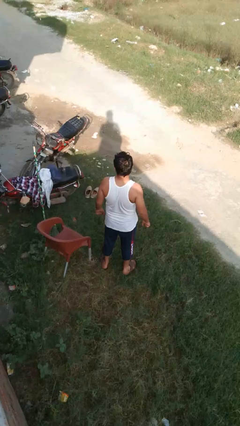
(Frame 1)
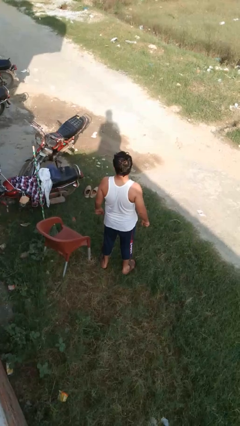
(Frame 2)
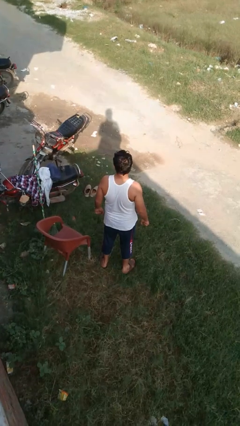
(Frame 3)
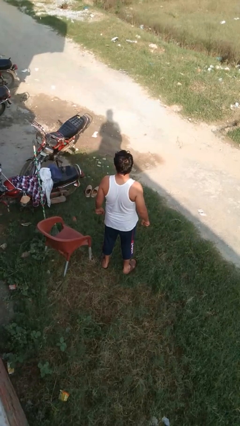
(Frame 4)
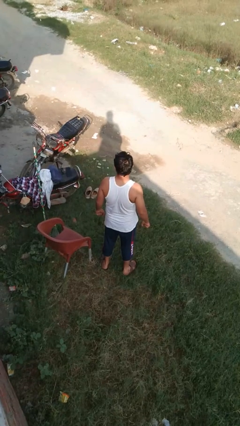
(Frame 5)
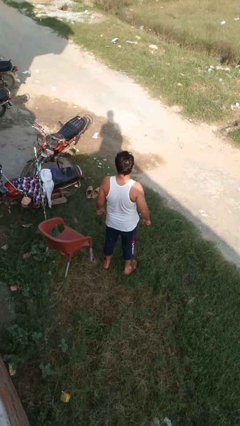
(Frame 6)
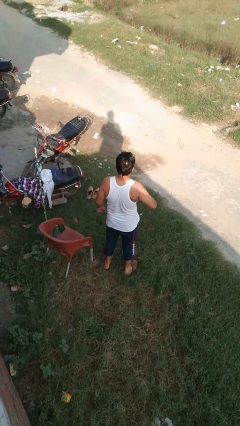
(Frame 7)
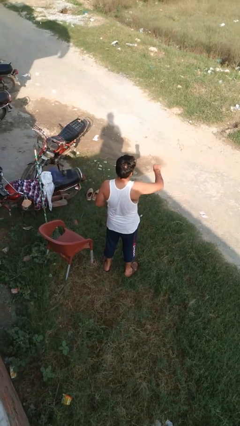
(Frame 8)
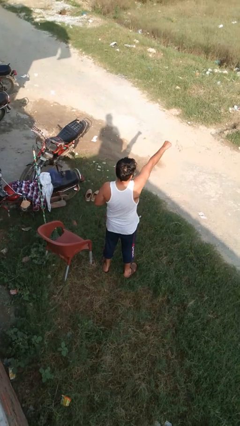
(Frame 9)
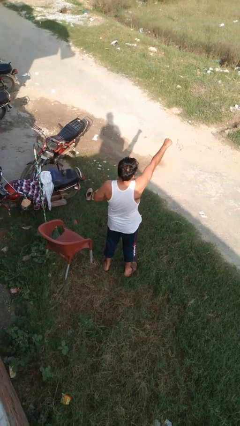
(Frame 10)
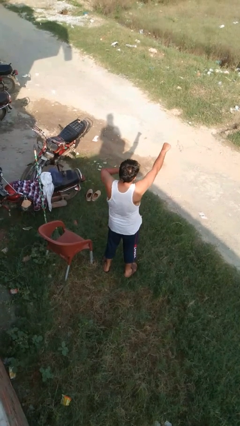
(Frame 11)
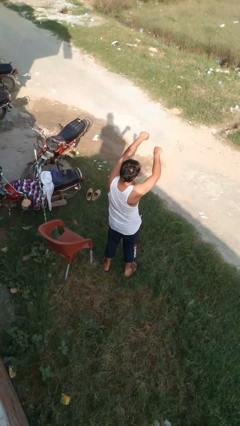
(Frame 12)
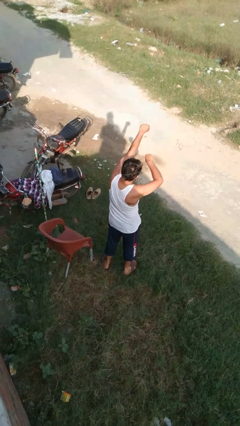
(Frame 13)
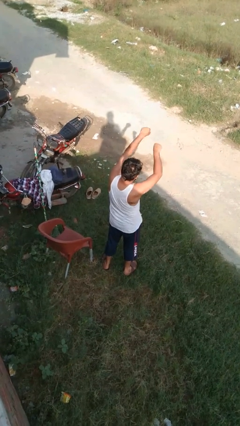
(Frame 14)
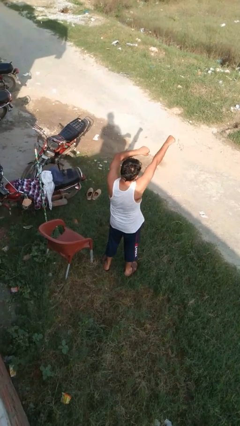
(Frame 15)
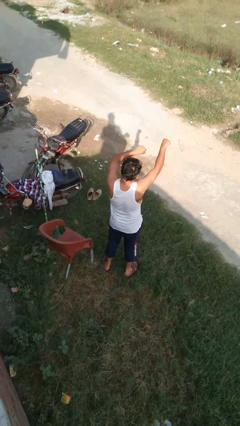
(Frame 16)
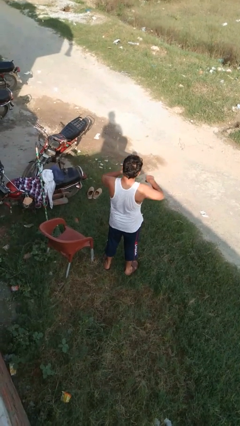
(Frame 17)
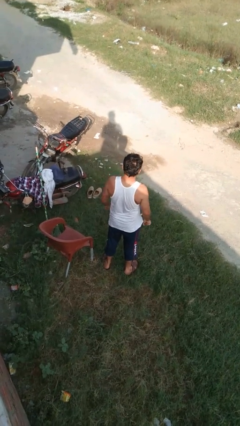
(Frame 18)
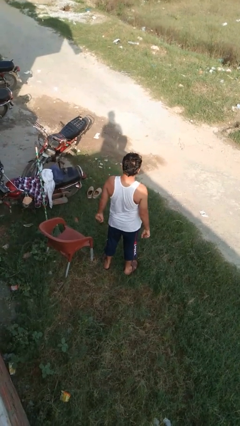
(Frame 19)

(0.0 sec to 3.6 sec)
person punches

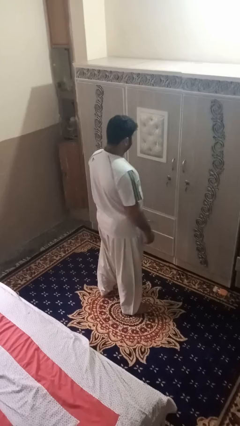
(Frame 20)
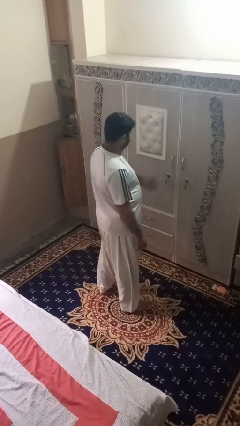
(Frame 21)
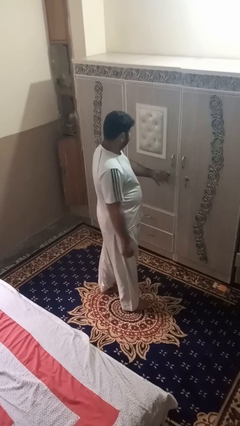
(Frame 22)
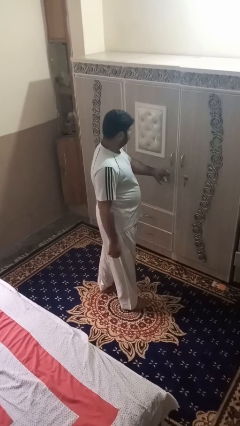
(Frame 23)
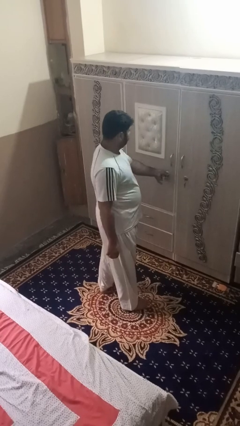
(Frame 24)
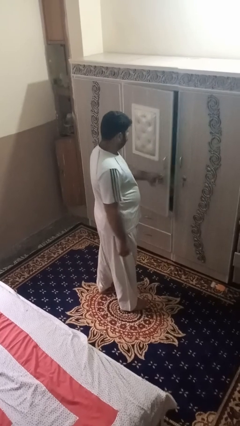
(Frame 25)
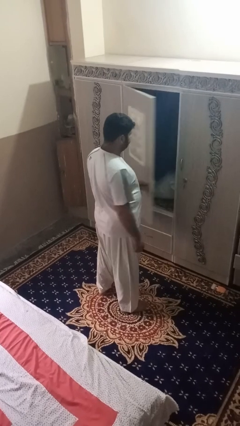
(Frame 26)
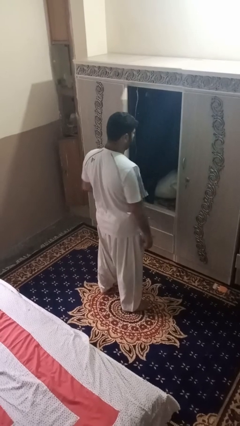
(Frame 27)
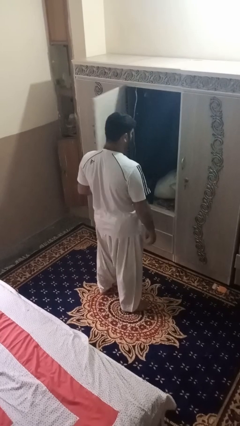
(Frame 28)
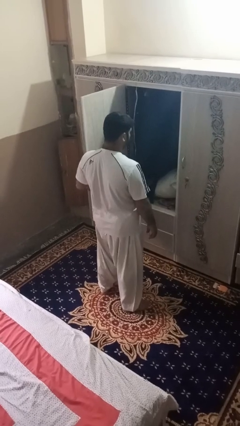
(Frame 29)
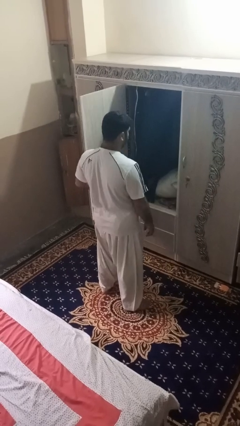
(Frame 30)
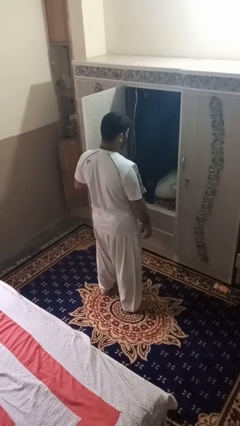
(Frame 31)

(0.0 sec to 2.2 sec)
person opens dresser drawer

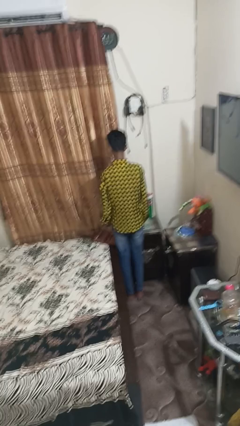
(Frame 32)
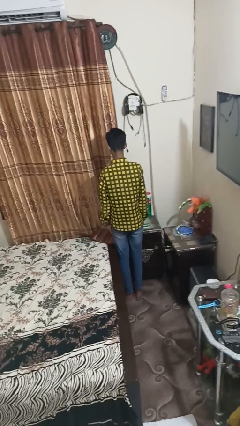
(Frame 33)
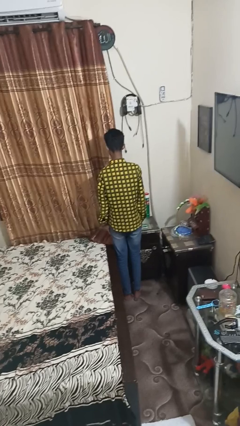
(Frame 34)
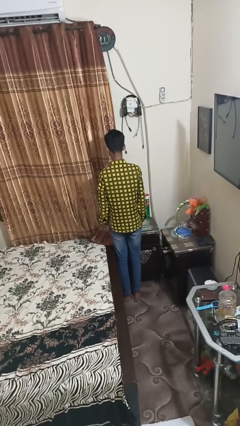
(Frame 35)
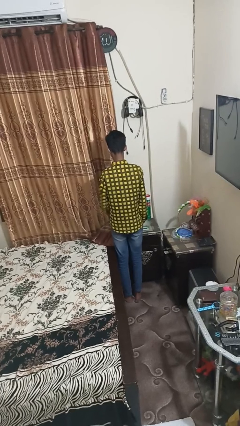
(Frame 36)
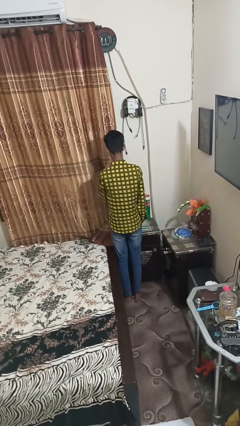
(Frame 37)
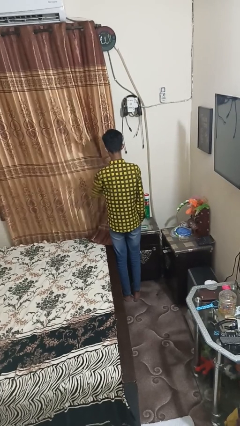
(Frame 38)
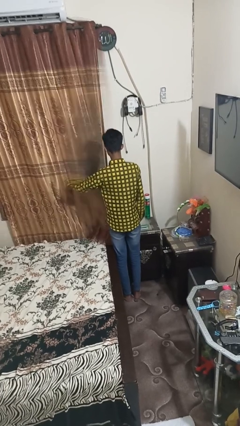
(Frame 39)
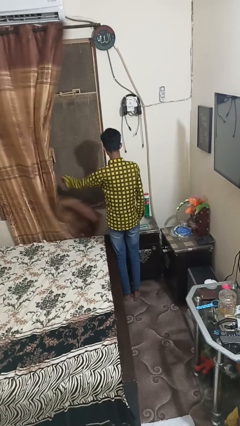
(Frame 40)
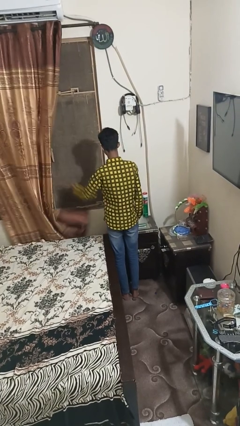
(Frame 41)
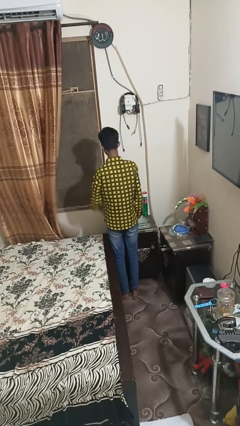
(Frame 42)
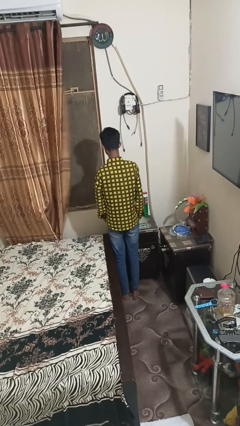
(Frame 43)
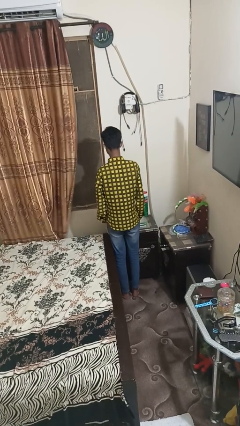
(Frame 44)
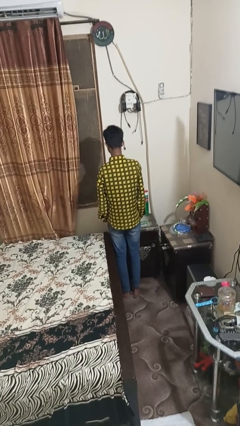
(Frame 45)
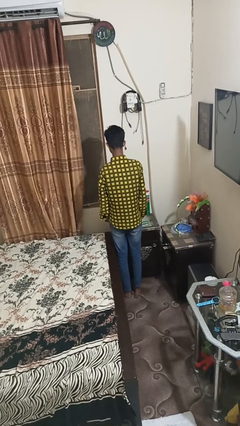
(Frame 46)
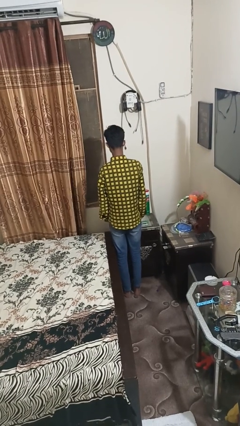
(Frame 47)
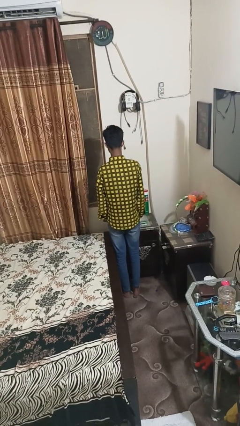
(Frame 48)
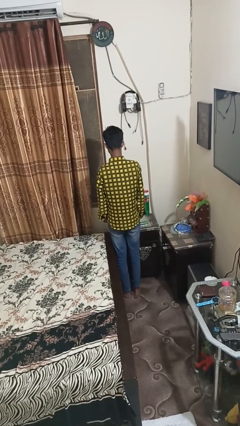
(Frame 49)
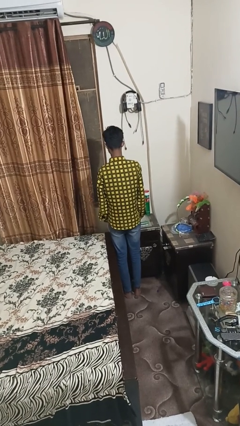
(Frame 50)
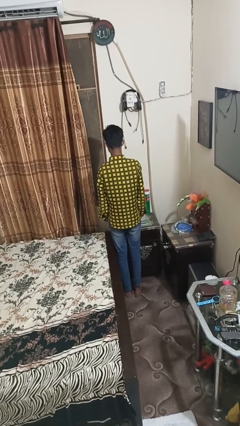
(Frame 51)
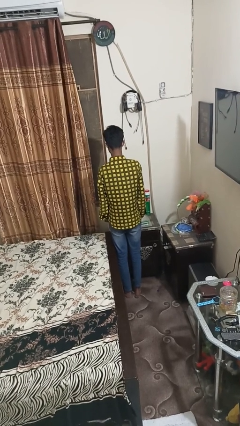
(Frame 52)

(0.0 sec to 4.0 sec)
person opens curtains

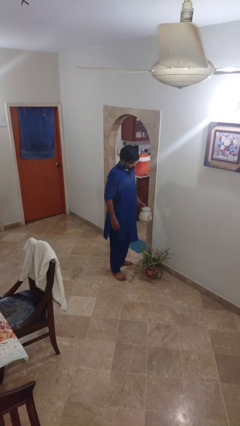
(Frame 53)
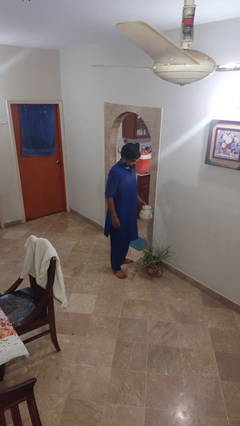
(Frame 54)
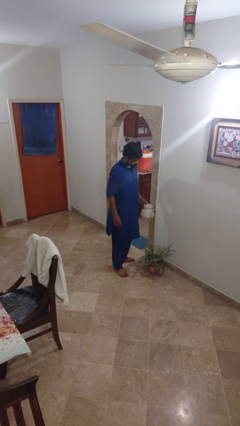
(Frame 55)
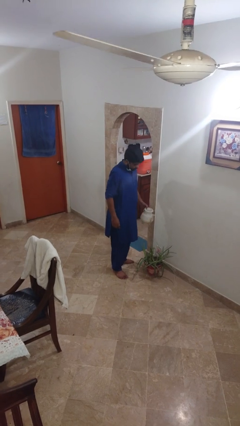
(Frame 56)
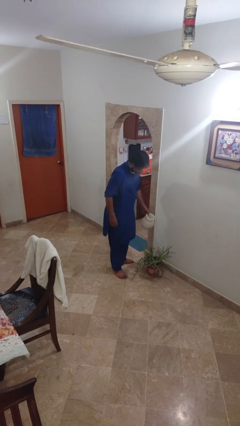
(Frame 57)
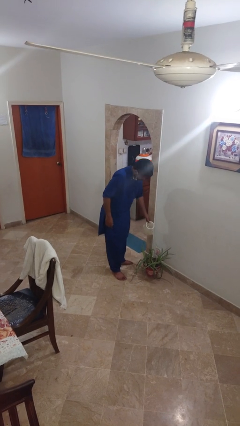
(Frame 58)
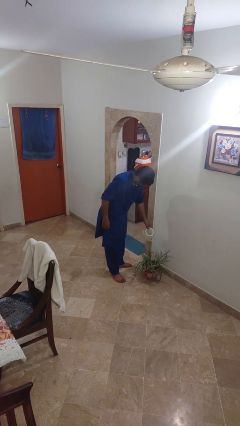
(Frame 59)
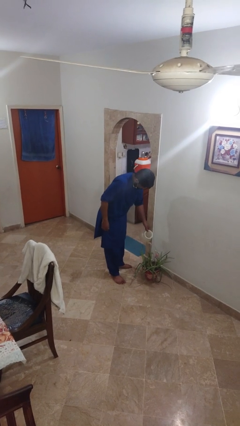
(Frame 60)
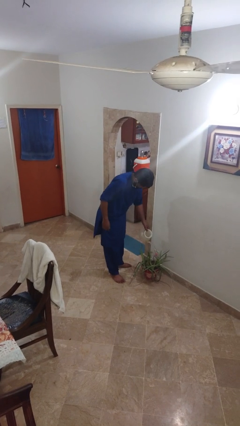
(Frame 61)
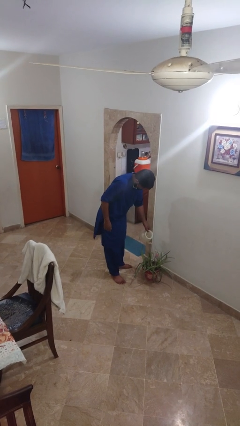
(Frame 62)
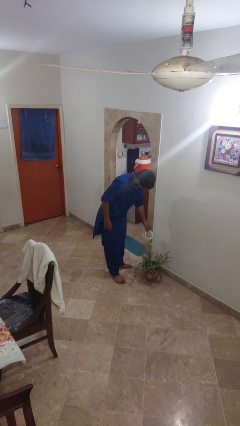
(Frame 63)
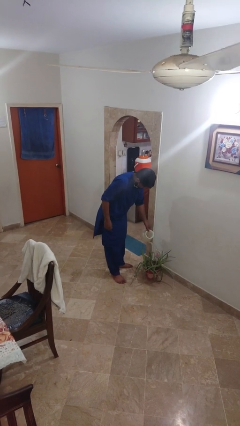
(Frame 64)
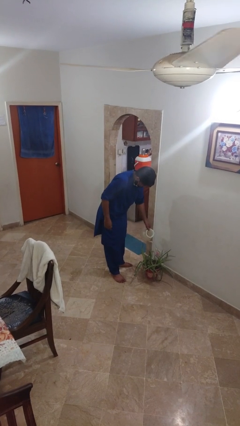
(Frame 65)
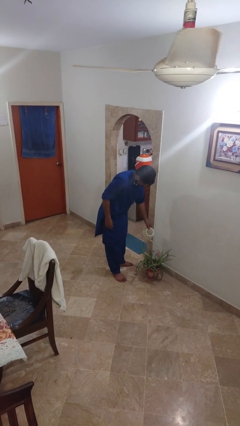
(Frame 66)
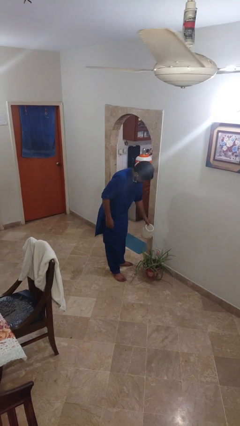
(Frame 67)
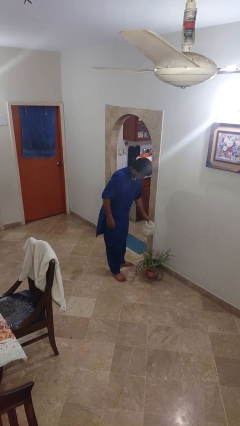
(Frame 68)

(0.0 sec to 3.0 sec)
person waters houseplant

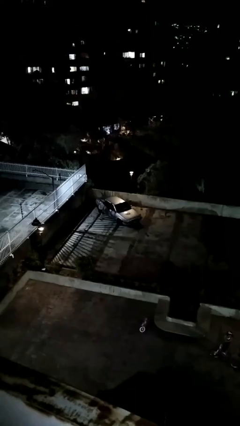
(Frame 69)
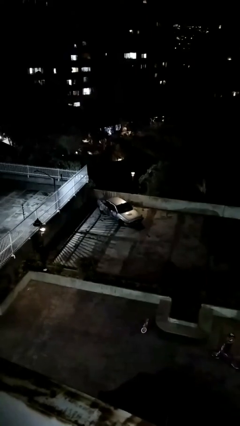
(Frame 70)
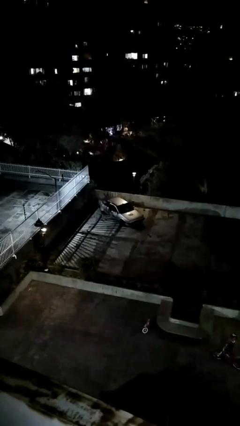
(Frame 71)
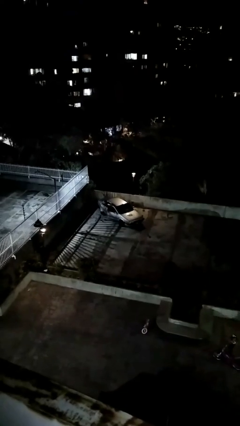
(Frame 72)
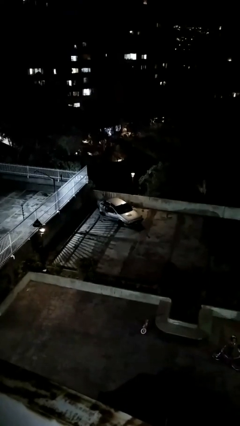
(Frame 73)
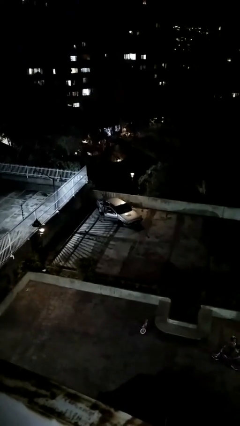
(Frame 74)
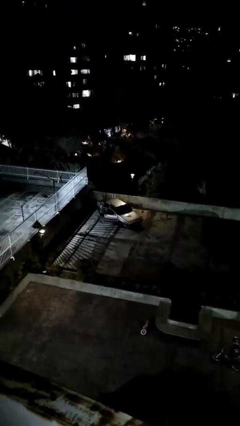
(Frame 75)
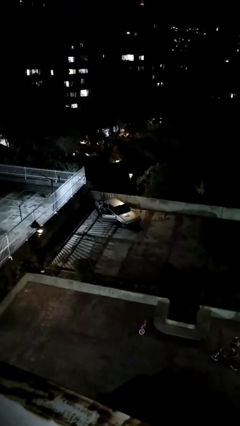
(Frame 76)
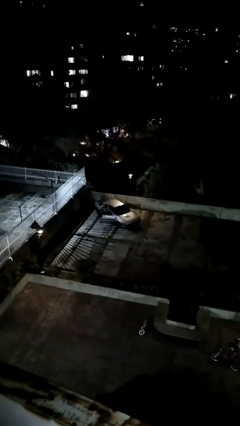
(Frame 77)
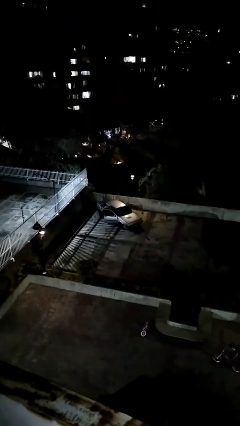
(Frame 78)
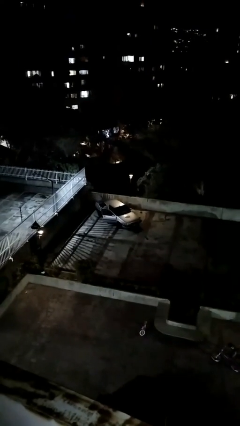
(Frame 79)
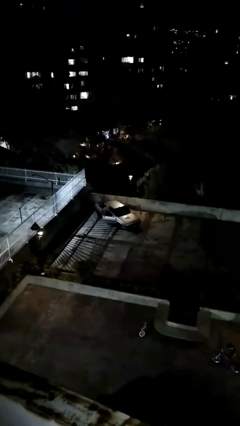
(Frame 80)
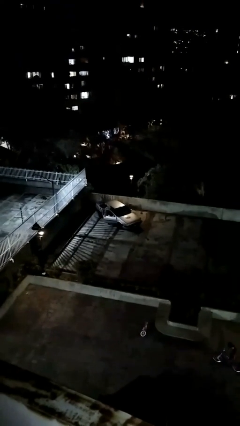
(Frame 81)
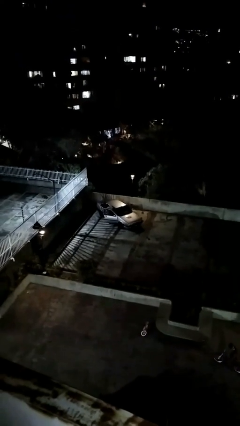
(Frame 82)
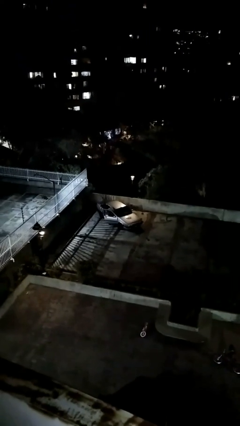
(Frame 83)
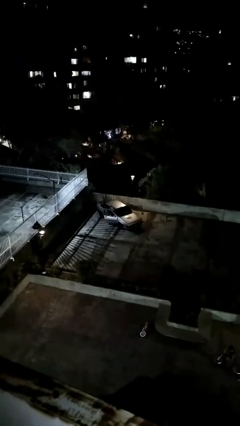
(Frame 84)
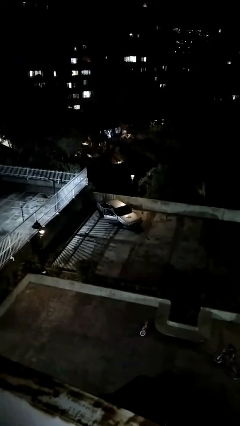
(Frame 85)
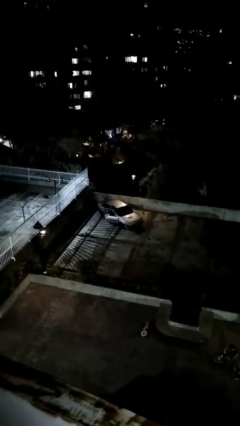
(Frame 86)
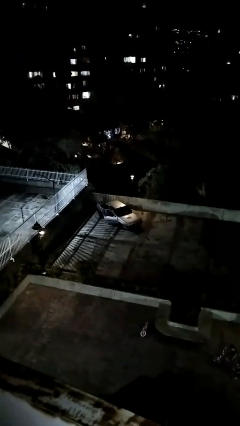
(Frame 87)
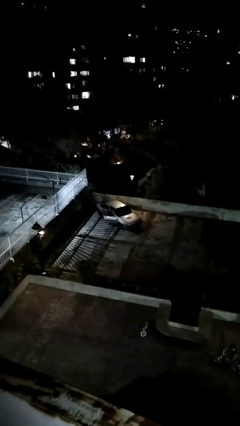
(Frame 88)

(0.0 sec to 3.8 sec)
car picks up person

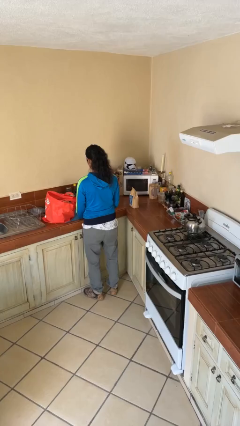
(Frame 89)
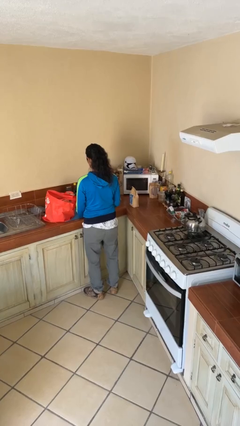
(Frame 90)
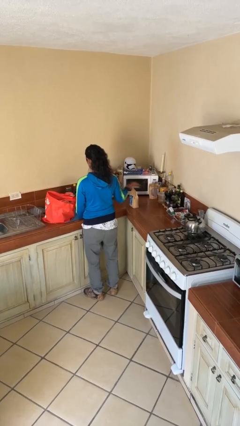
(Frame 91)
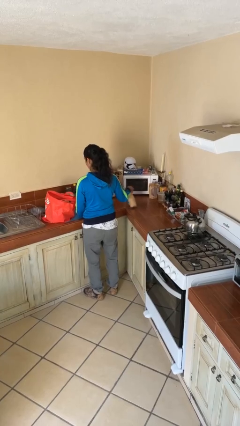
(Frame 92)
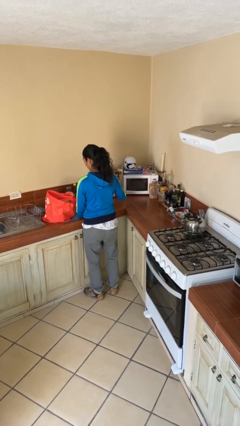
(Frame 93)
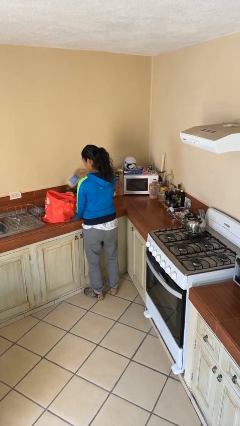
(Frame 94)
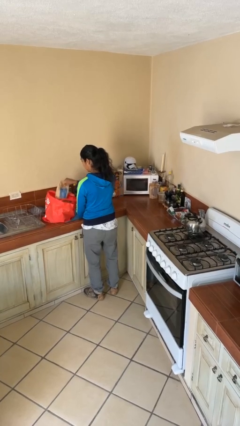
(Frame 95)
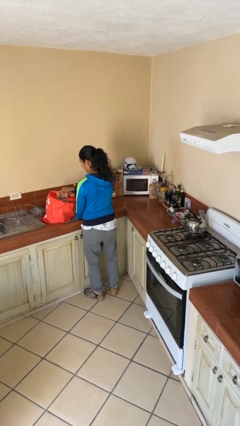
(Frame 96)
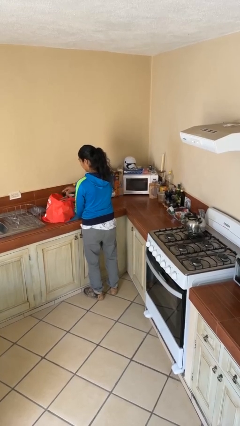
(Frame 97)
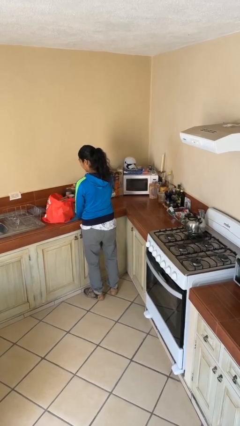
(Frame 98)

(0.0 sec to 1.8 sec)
person puts object into bag
